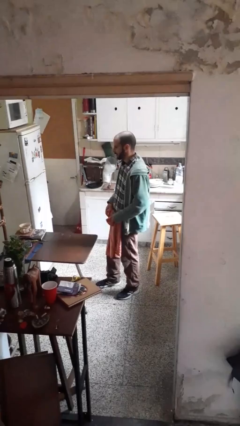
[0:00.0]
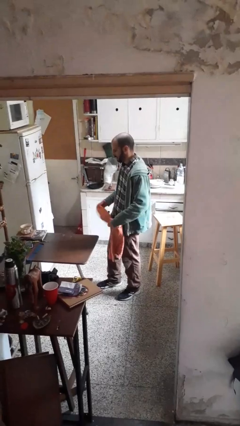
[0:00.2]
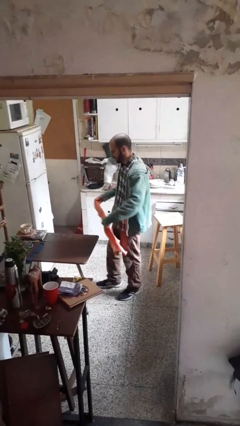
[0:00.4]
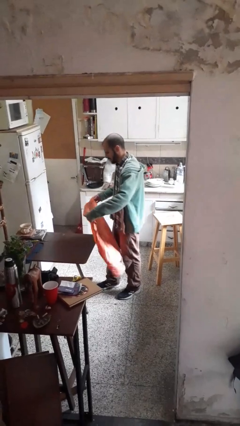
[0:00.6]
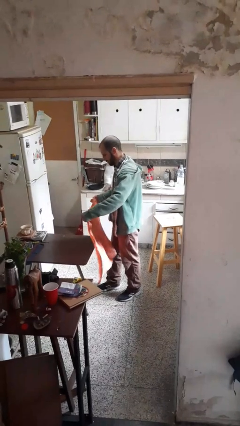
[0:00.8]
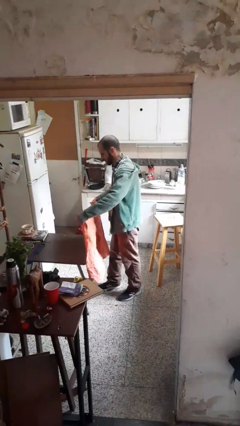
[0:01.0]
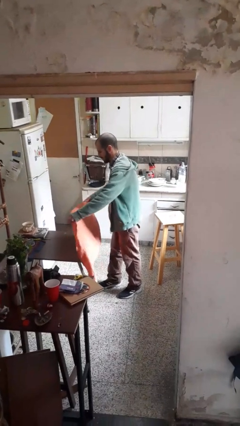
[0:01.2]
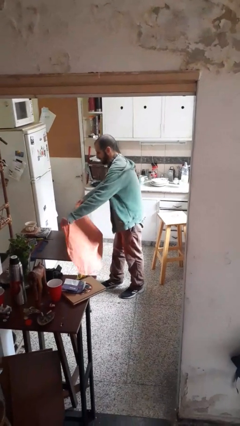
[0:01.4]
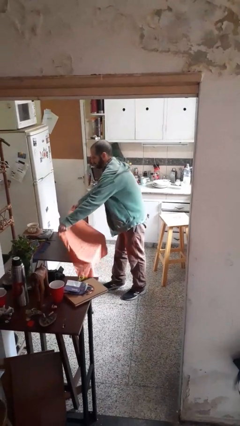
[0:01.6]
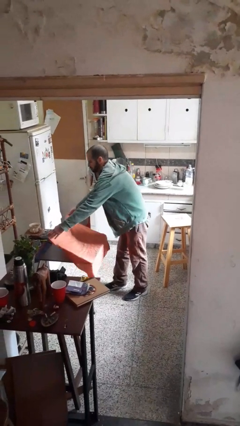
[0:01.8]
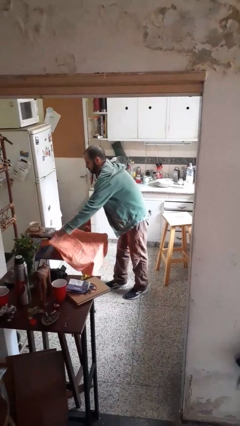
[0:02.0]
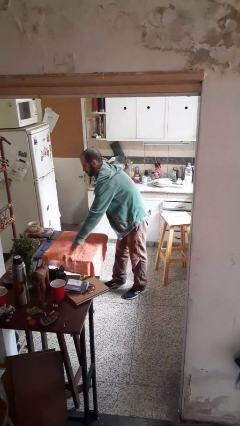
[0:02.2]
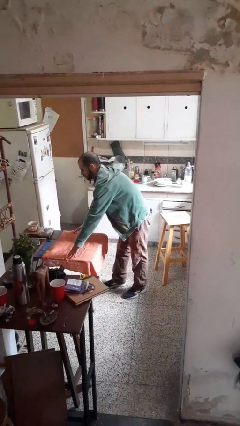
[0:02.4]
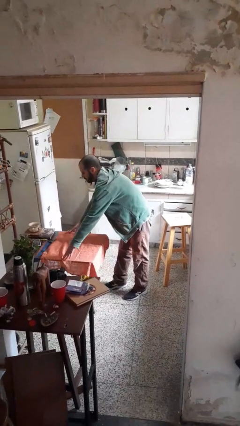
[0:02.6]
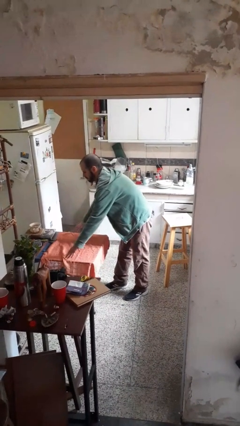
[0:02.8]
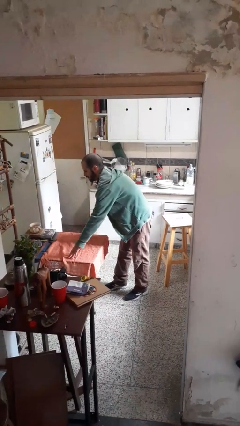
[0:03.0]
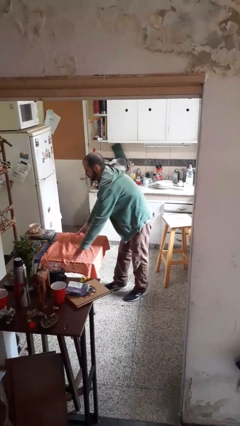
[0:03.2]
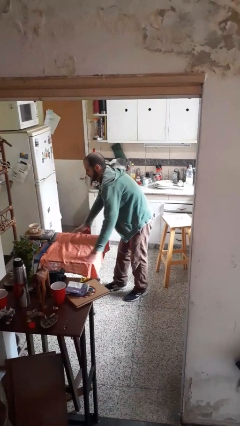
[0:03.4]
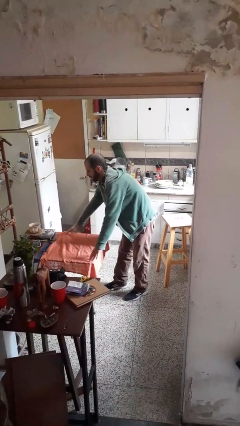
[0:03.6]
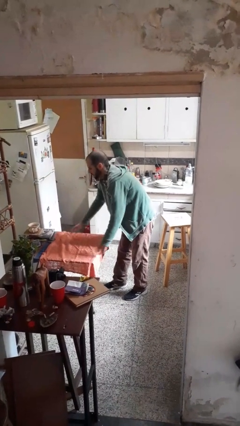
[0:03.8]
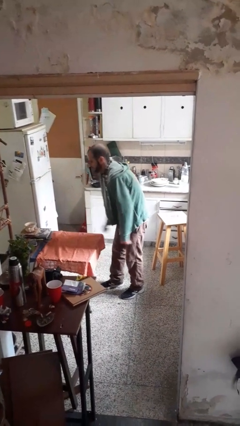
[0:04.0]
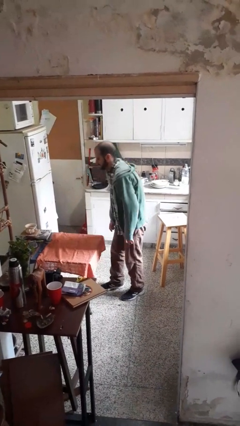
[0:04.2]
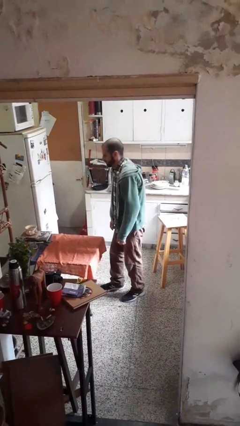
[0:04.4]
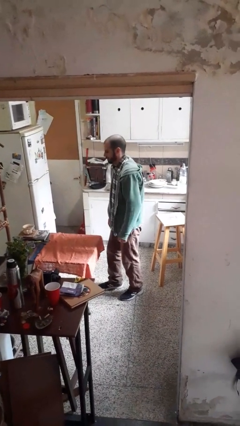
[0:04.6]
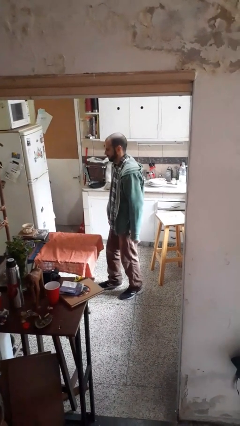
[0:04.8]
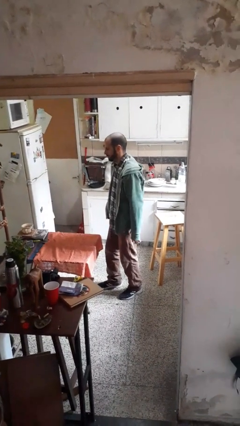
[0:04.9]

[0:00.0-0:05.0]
person spreads tablecloth

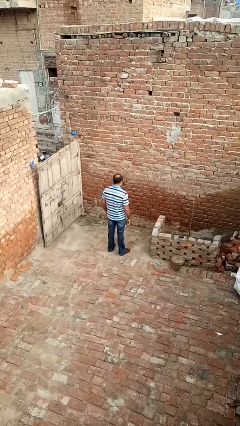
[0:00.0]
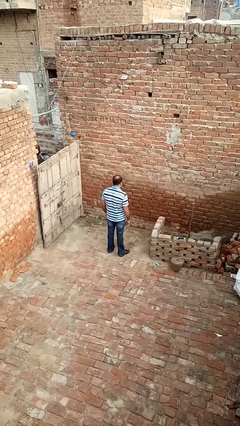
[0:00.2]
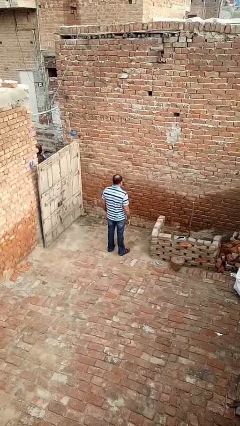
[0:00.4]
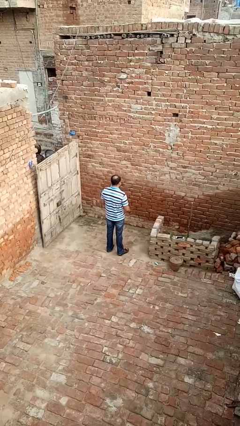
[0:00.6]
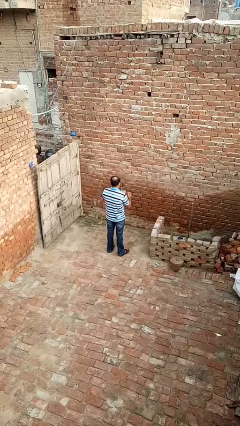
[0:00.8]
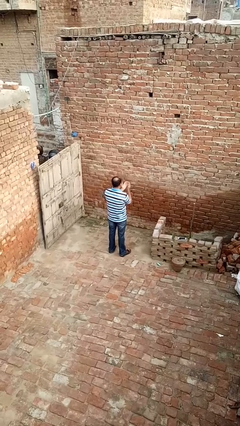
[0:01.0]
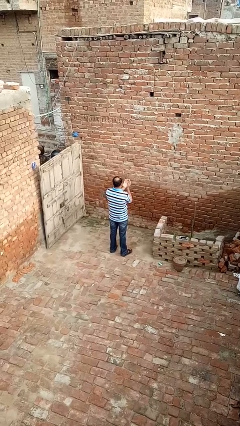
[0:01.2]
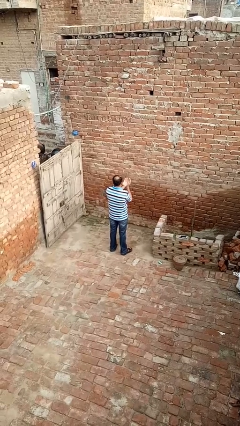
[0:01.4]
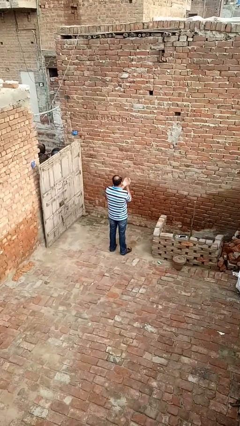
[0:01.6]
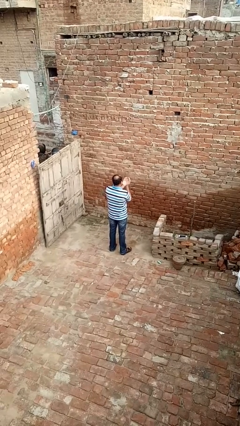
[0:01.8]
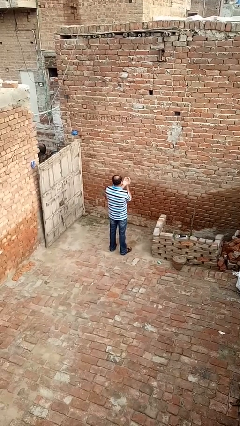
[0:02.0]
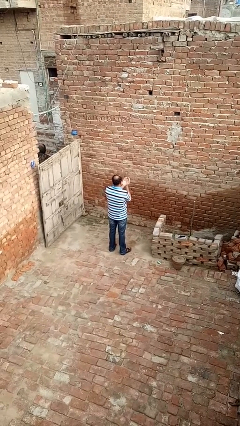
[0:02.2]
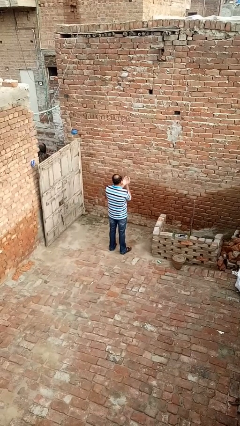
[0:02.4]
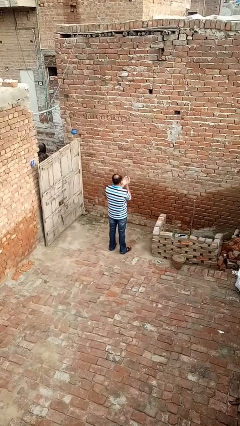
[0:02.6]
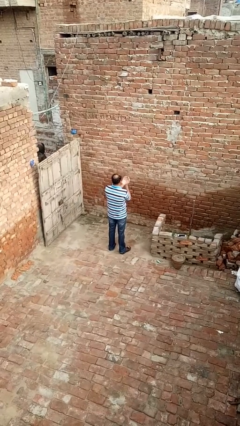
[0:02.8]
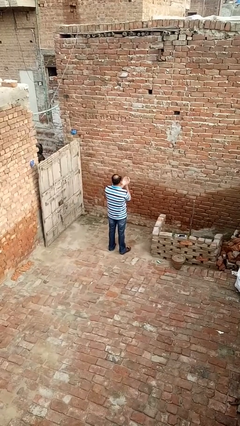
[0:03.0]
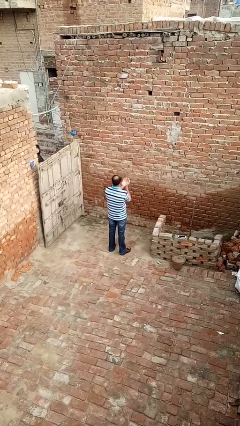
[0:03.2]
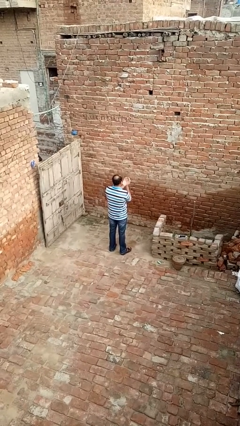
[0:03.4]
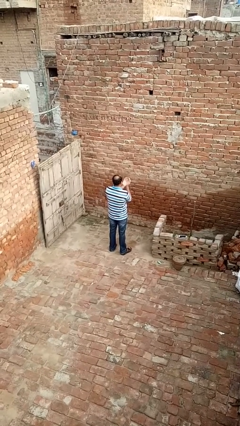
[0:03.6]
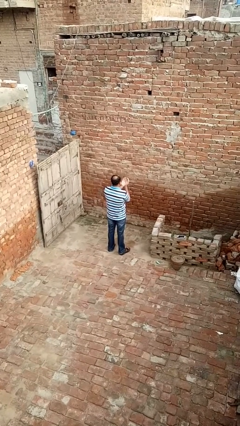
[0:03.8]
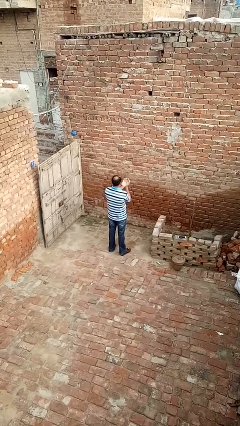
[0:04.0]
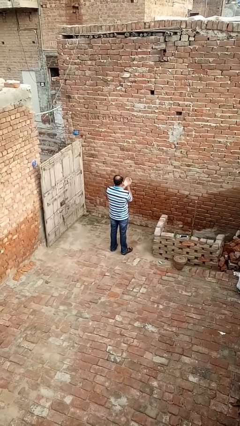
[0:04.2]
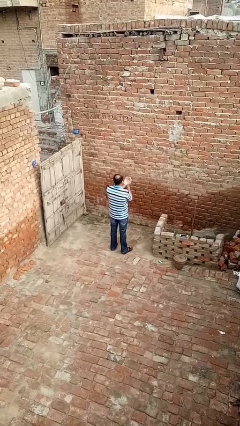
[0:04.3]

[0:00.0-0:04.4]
person prays

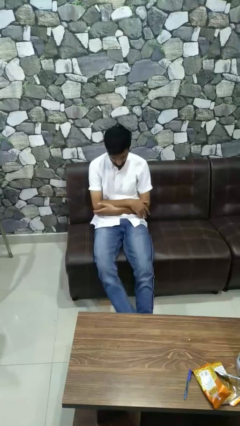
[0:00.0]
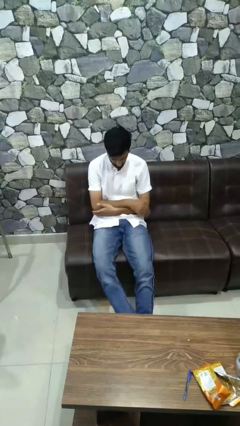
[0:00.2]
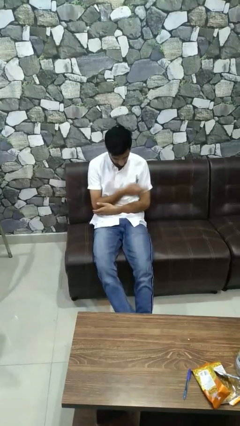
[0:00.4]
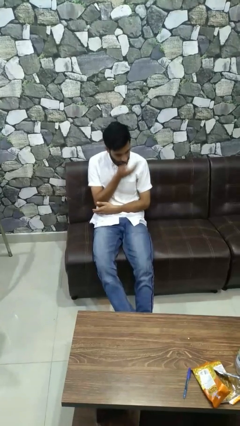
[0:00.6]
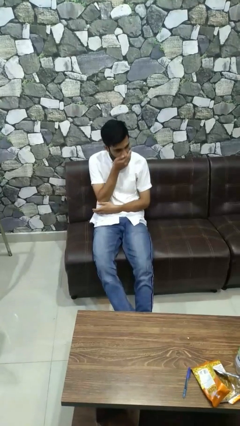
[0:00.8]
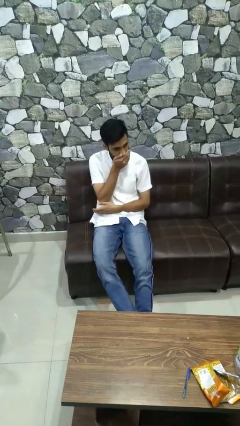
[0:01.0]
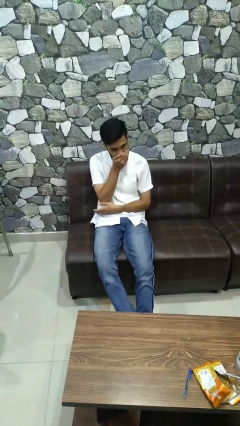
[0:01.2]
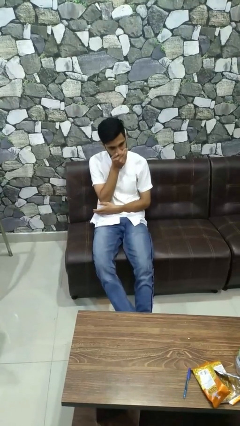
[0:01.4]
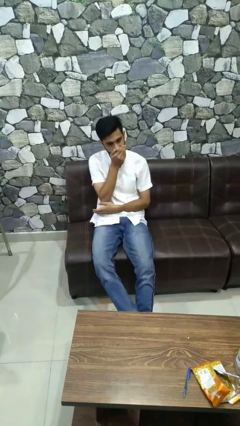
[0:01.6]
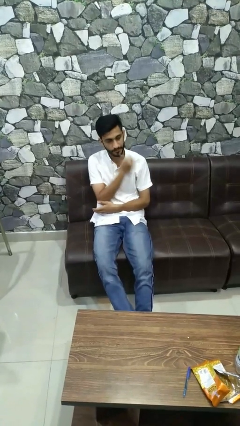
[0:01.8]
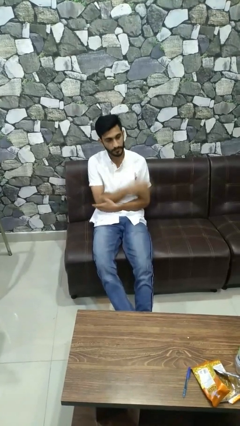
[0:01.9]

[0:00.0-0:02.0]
person covers face with hands

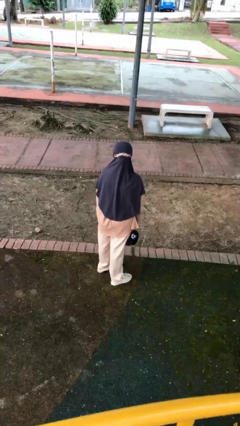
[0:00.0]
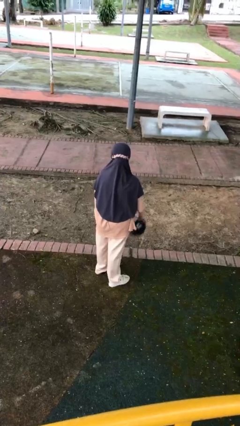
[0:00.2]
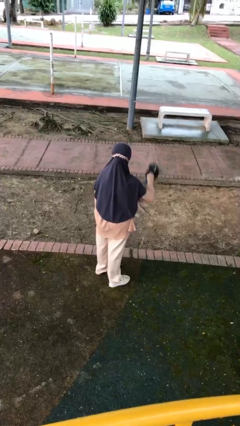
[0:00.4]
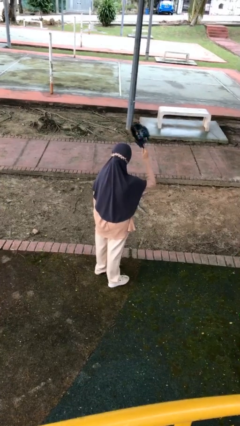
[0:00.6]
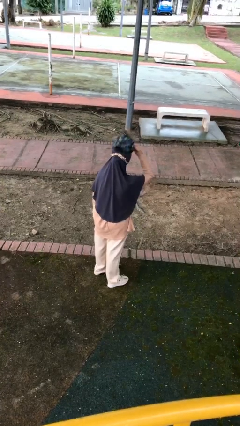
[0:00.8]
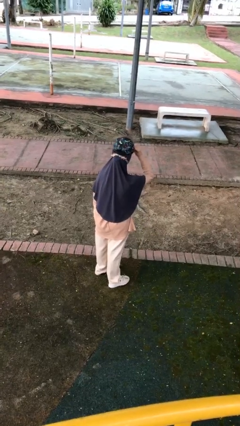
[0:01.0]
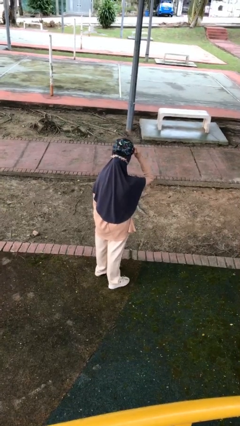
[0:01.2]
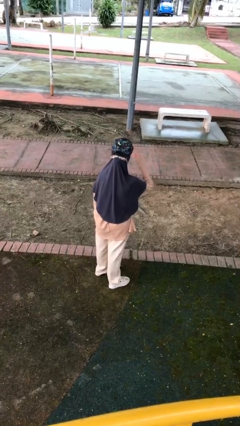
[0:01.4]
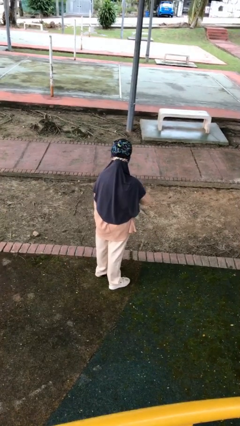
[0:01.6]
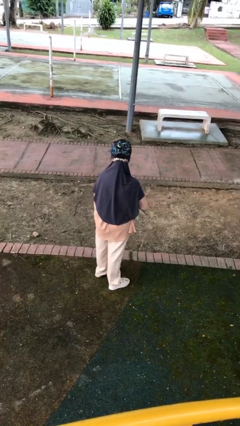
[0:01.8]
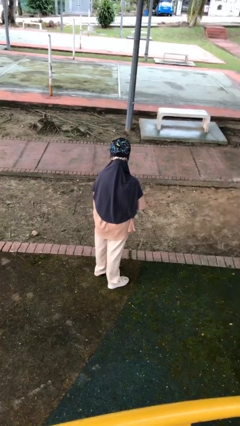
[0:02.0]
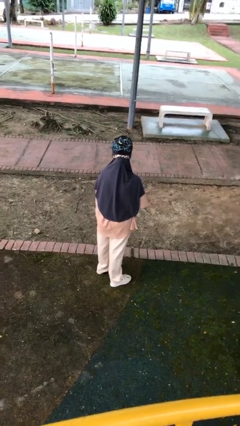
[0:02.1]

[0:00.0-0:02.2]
person puts on hat

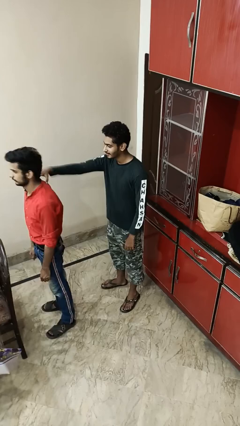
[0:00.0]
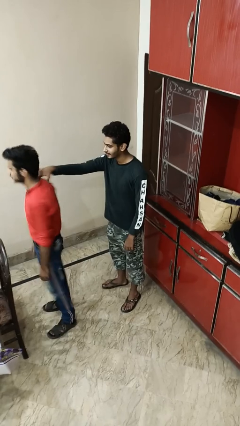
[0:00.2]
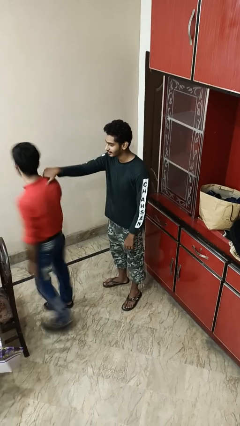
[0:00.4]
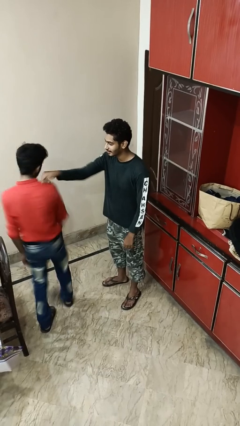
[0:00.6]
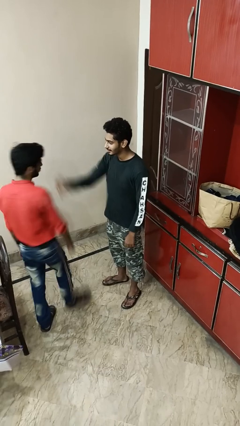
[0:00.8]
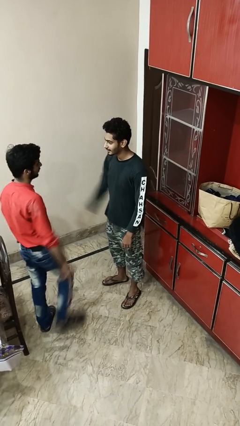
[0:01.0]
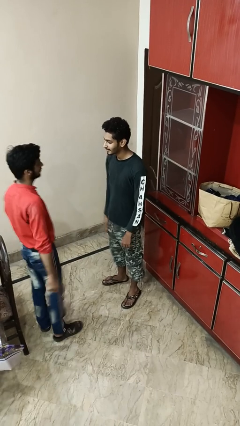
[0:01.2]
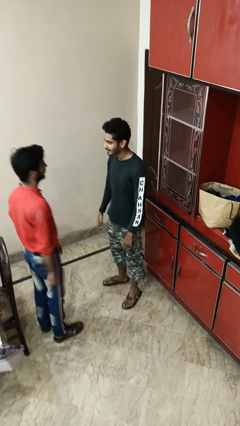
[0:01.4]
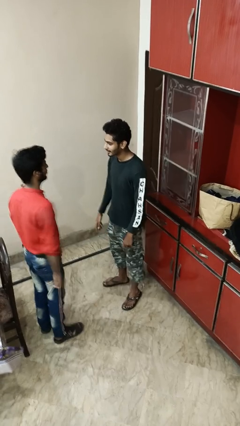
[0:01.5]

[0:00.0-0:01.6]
person spins person around

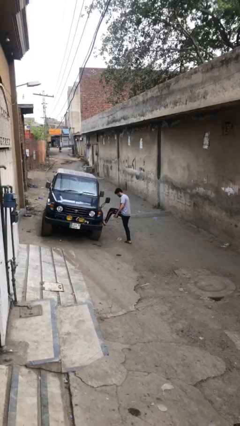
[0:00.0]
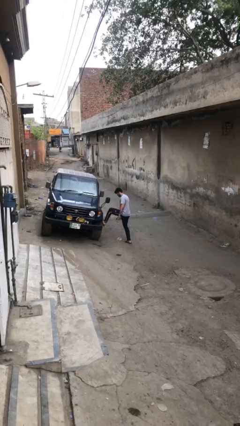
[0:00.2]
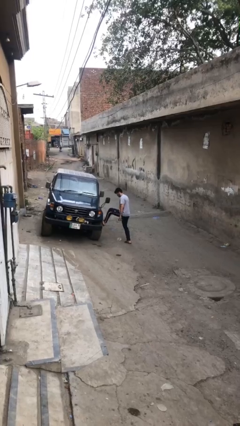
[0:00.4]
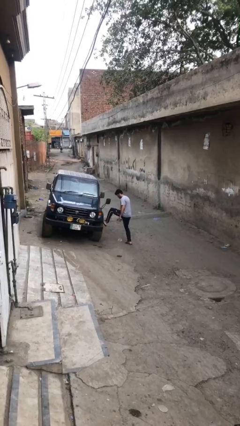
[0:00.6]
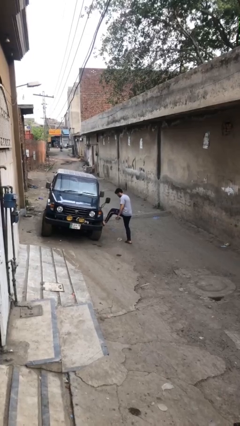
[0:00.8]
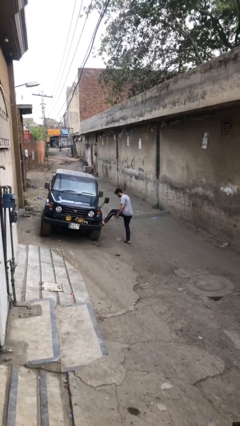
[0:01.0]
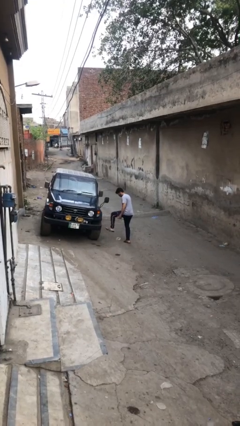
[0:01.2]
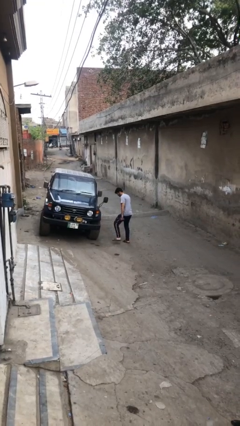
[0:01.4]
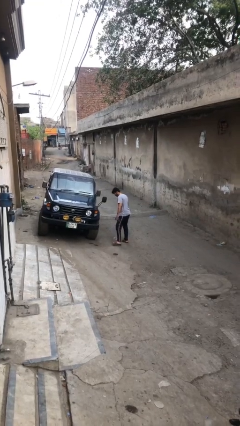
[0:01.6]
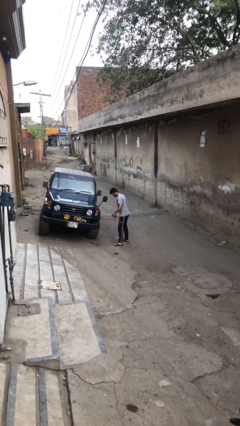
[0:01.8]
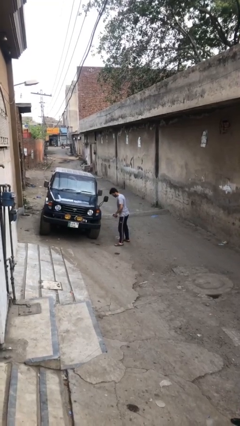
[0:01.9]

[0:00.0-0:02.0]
person kicks car tires

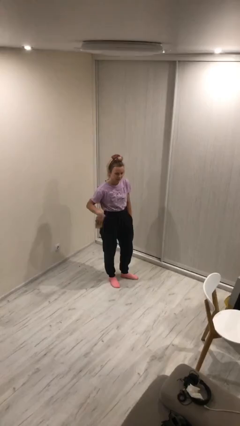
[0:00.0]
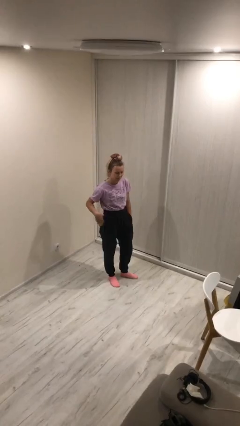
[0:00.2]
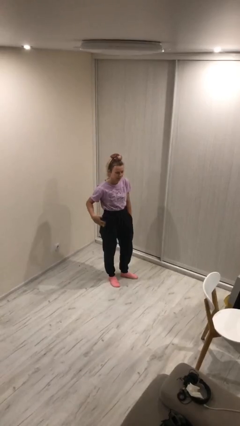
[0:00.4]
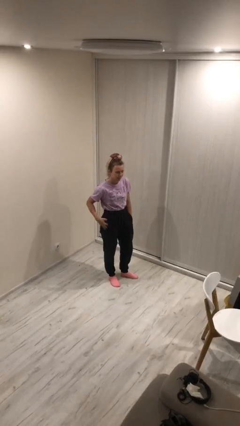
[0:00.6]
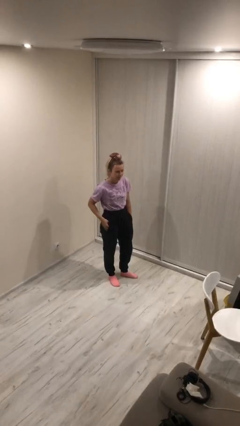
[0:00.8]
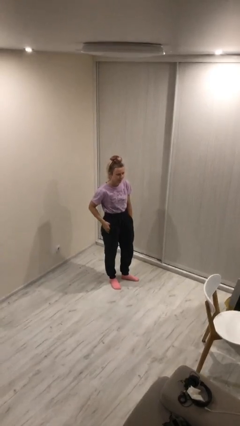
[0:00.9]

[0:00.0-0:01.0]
person puts phone into pocket
